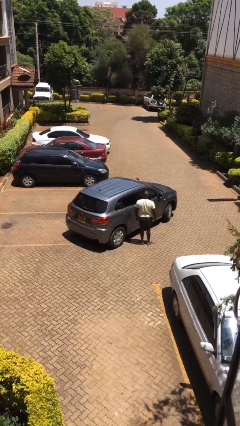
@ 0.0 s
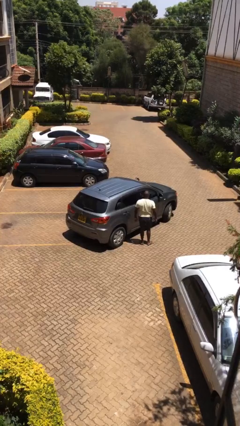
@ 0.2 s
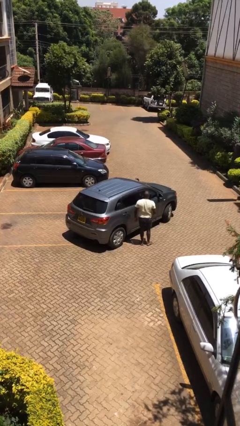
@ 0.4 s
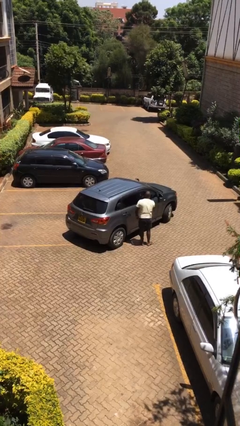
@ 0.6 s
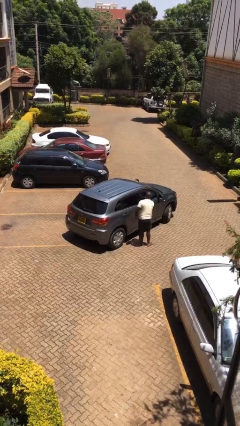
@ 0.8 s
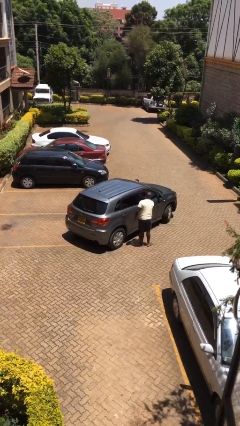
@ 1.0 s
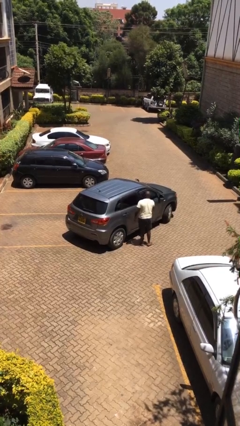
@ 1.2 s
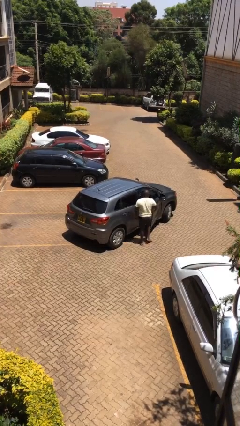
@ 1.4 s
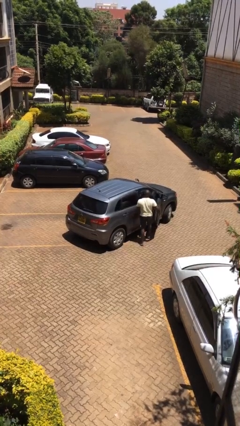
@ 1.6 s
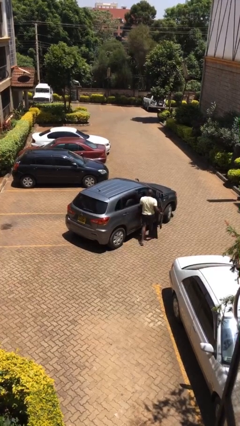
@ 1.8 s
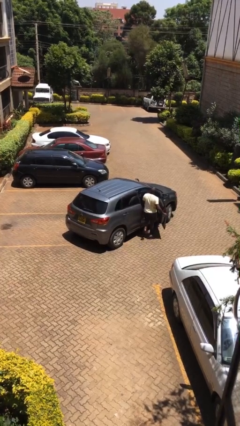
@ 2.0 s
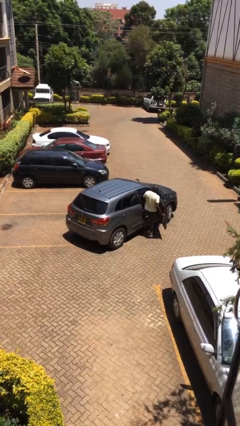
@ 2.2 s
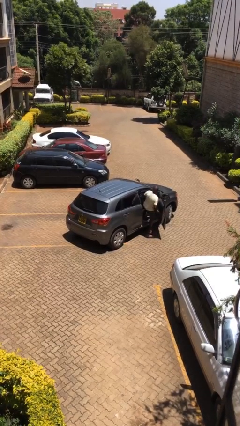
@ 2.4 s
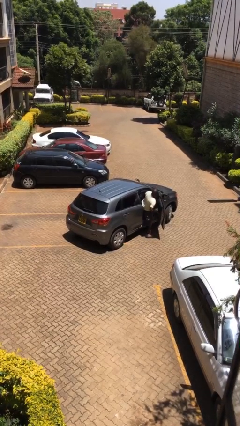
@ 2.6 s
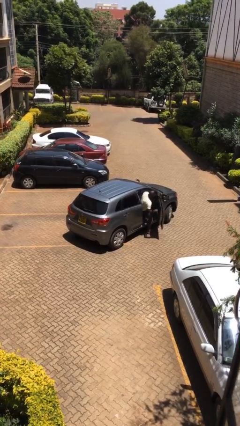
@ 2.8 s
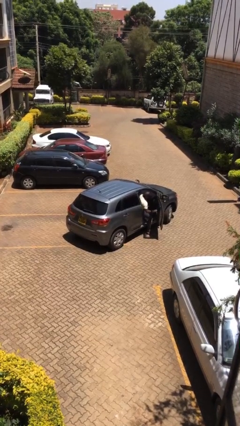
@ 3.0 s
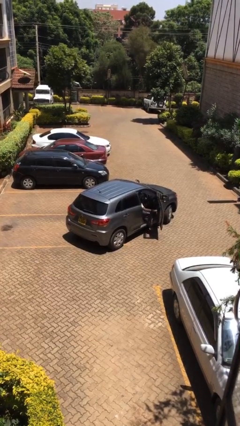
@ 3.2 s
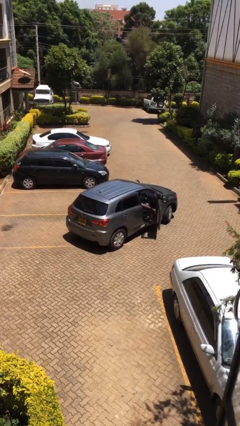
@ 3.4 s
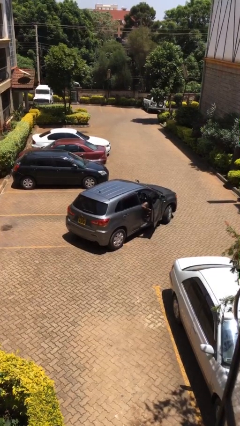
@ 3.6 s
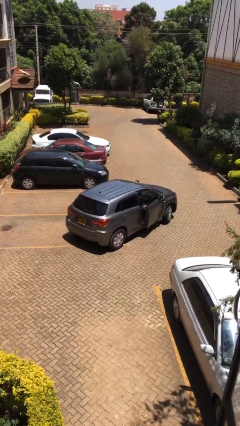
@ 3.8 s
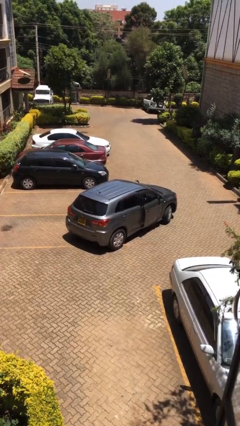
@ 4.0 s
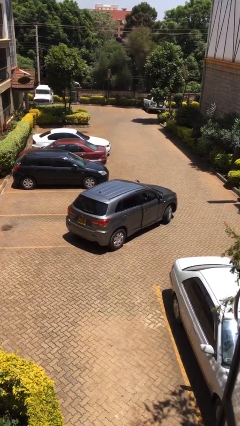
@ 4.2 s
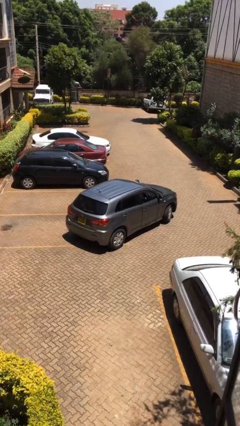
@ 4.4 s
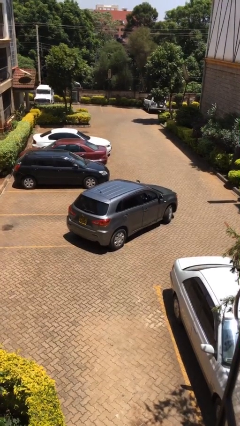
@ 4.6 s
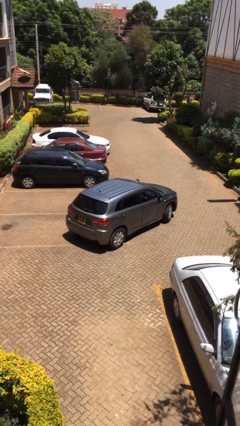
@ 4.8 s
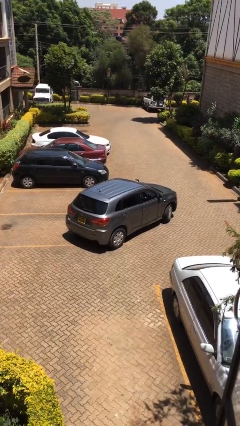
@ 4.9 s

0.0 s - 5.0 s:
car picks up person

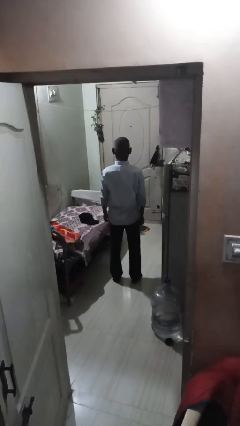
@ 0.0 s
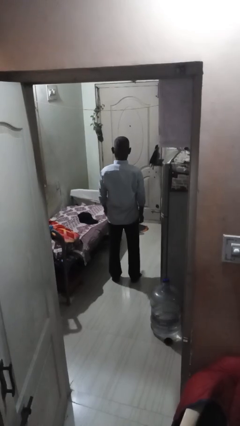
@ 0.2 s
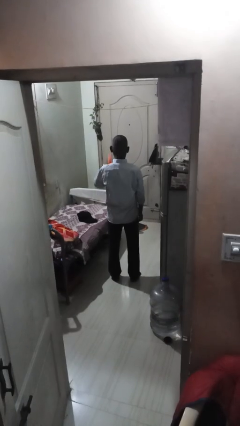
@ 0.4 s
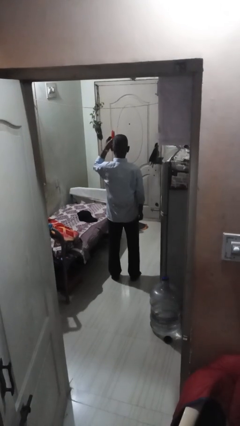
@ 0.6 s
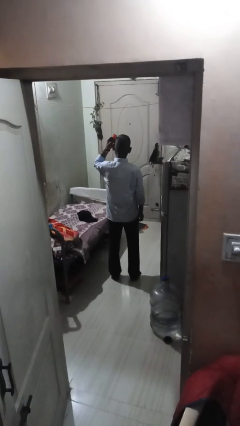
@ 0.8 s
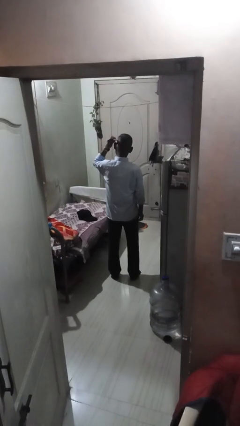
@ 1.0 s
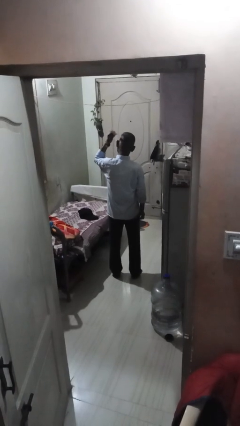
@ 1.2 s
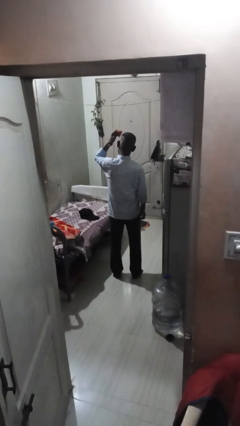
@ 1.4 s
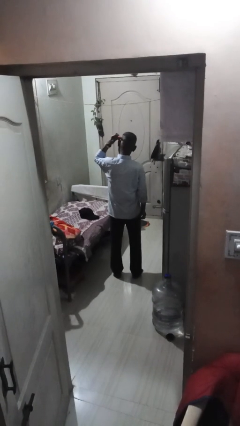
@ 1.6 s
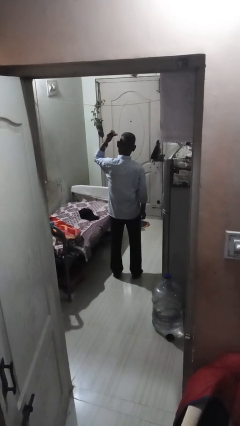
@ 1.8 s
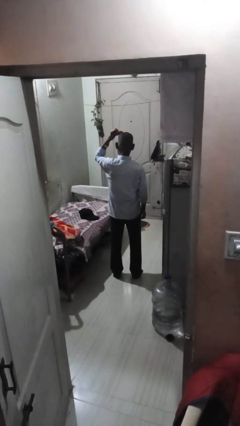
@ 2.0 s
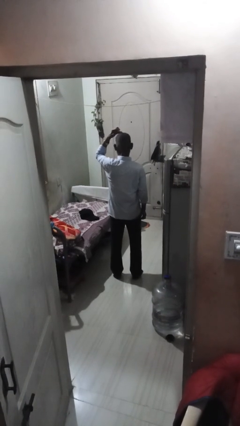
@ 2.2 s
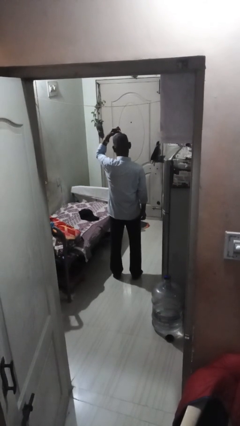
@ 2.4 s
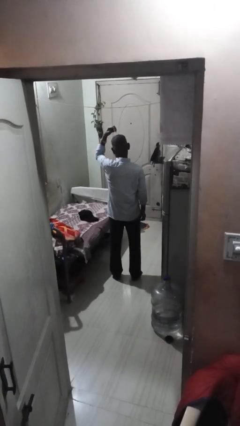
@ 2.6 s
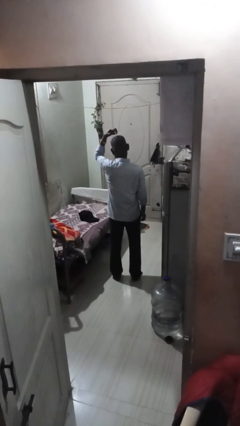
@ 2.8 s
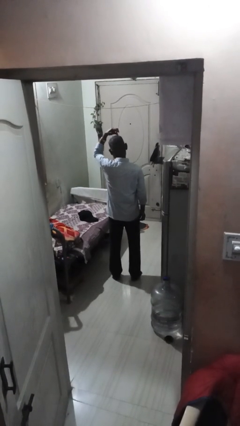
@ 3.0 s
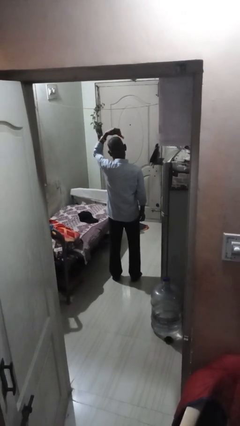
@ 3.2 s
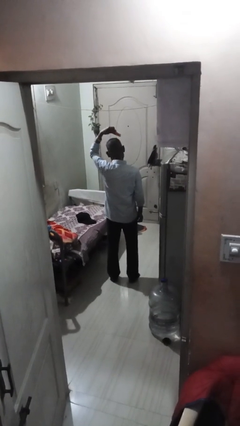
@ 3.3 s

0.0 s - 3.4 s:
person brushes hair

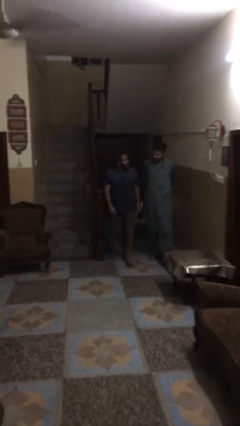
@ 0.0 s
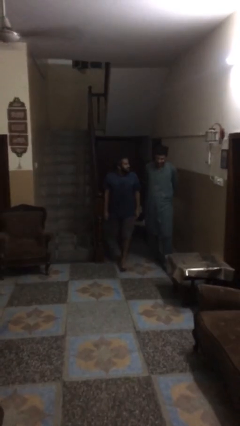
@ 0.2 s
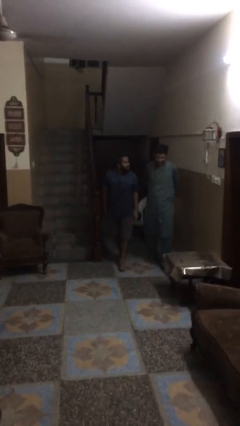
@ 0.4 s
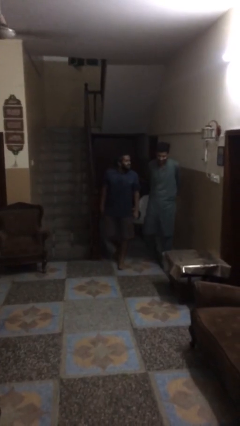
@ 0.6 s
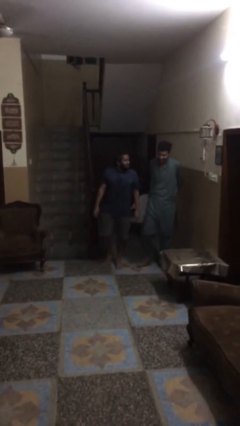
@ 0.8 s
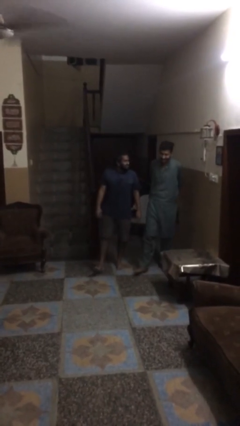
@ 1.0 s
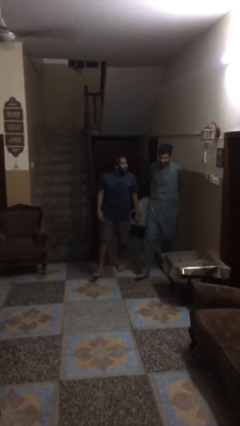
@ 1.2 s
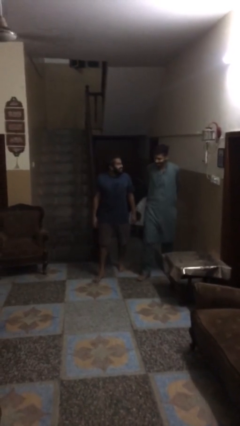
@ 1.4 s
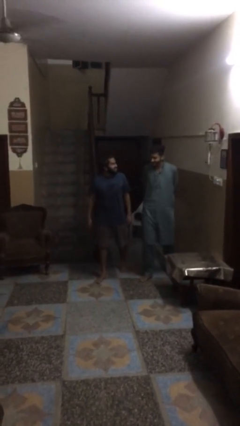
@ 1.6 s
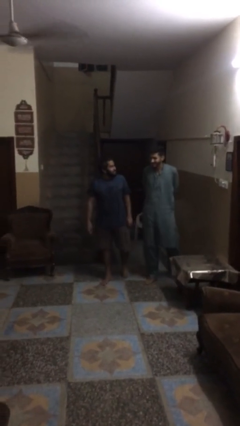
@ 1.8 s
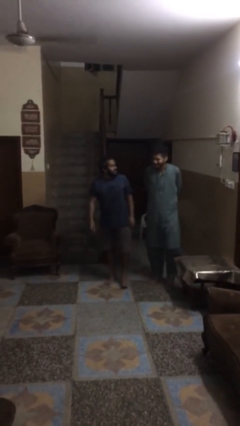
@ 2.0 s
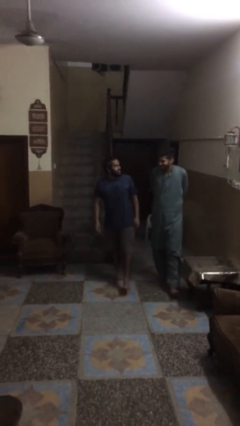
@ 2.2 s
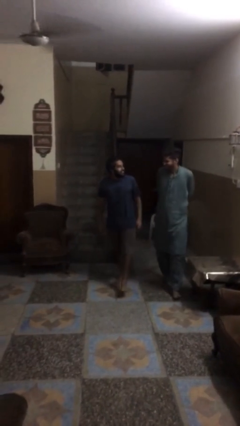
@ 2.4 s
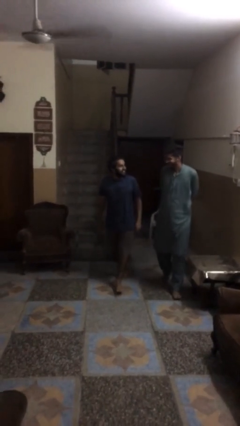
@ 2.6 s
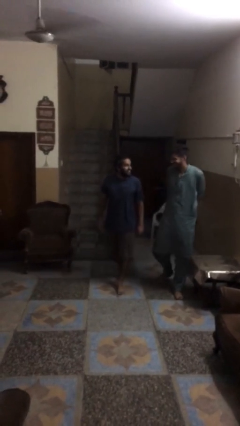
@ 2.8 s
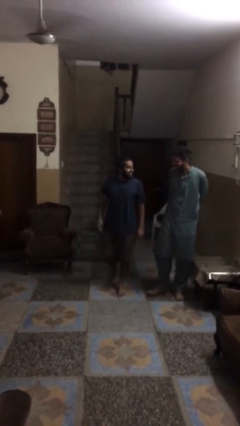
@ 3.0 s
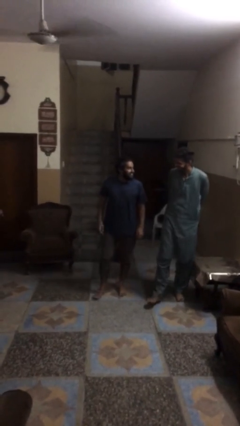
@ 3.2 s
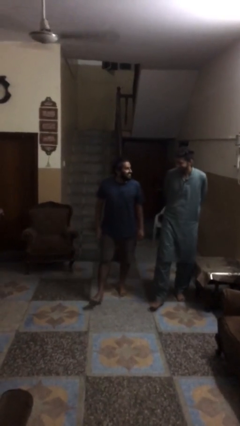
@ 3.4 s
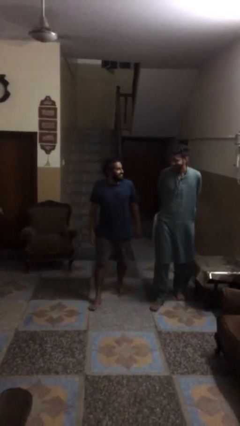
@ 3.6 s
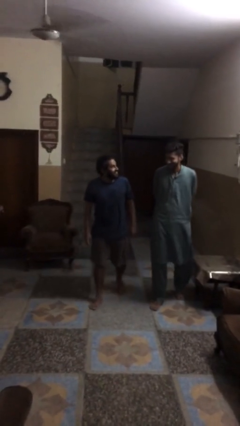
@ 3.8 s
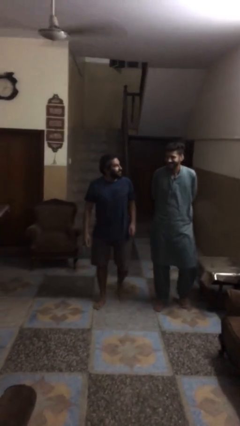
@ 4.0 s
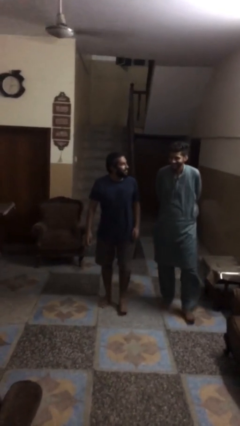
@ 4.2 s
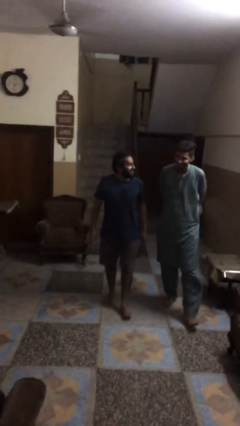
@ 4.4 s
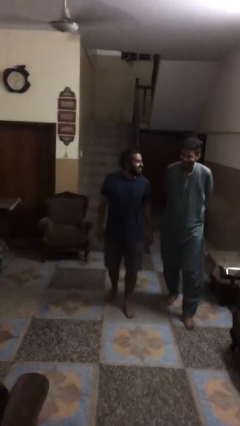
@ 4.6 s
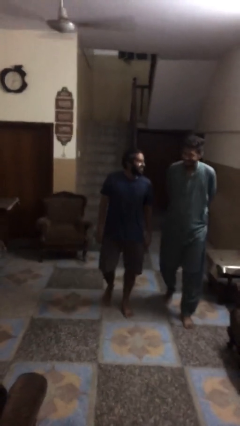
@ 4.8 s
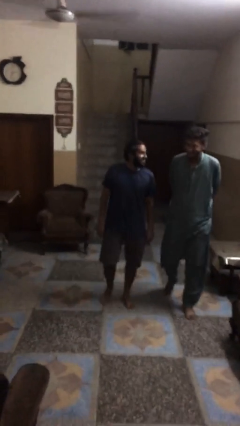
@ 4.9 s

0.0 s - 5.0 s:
person talks to person

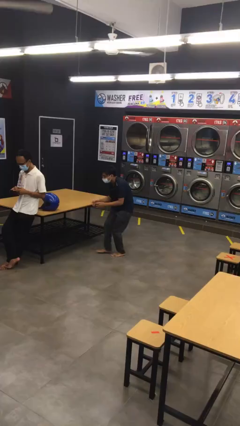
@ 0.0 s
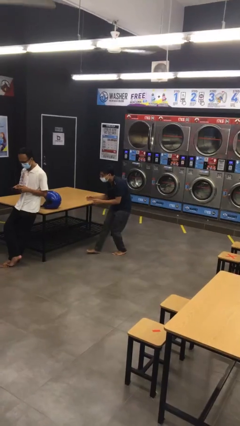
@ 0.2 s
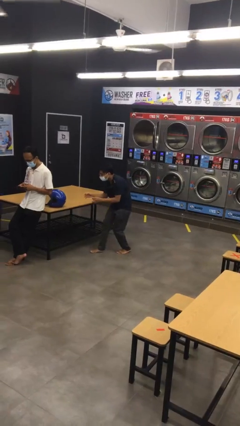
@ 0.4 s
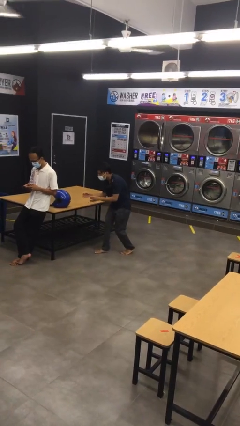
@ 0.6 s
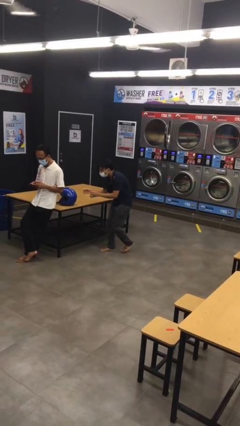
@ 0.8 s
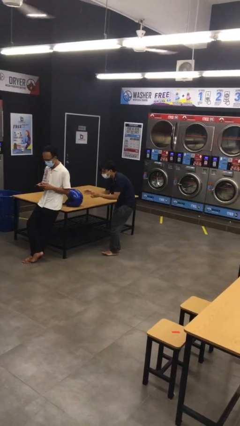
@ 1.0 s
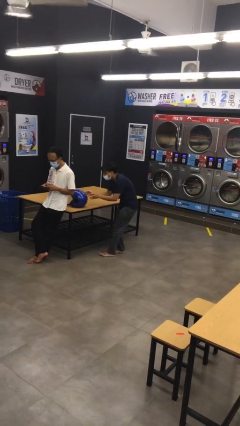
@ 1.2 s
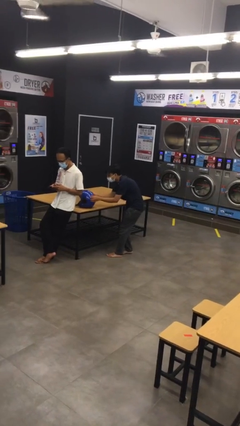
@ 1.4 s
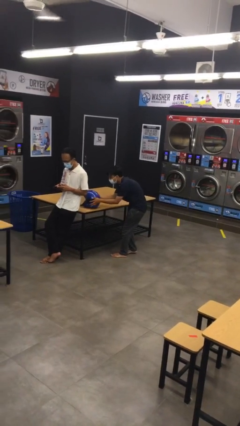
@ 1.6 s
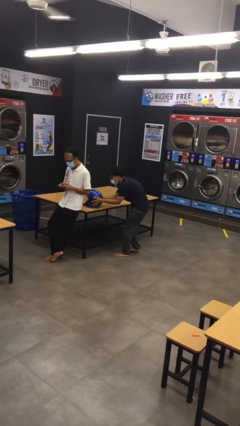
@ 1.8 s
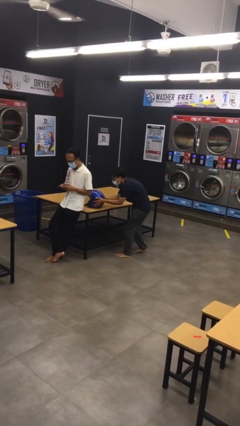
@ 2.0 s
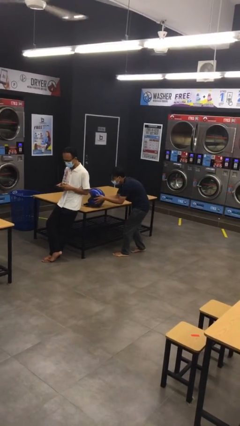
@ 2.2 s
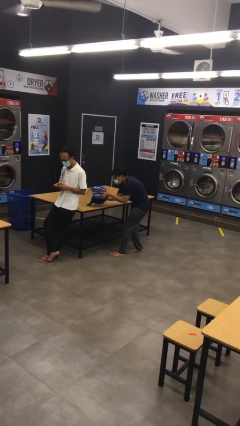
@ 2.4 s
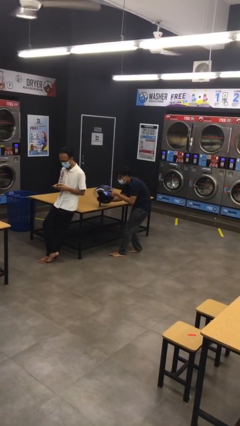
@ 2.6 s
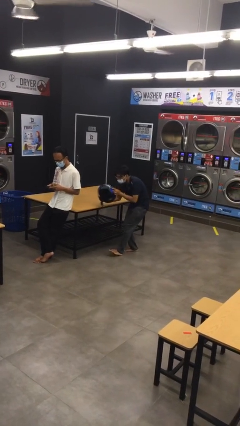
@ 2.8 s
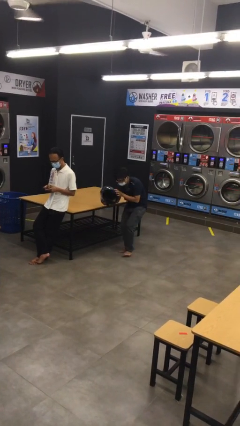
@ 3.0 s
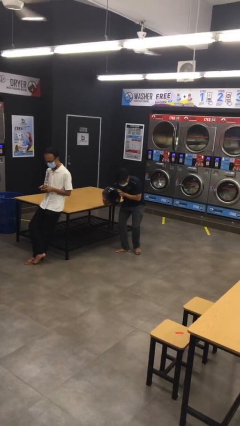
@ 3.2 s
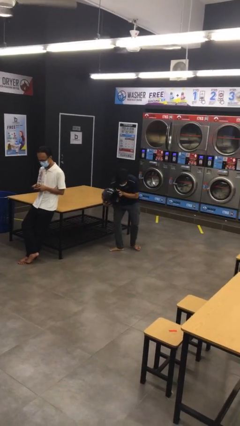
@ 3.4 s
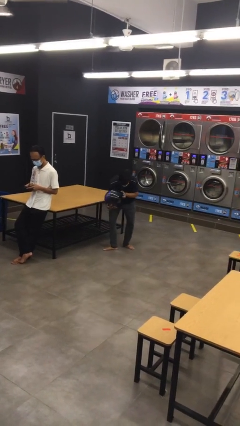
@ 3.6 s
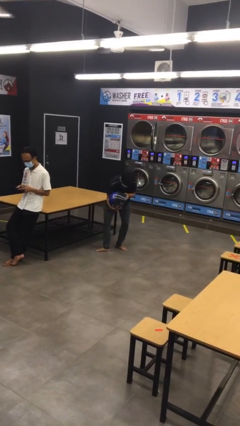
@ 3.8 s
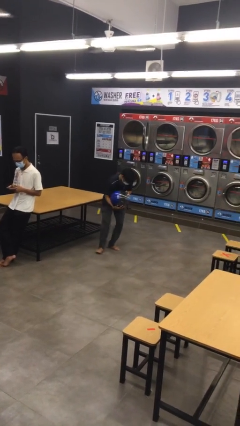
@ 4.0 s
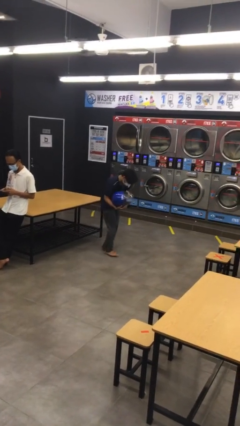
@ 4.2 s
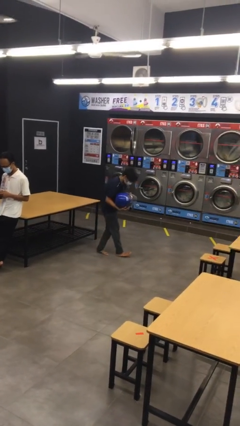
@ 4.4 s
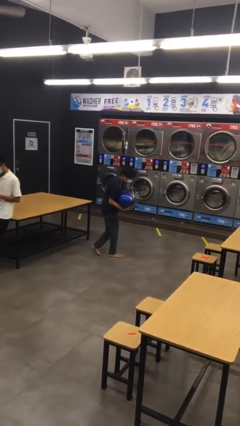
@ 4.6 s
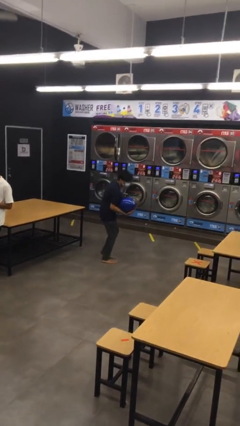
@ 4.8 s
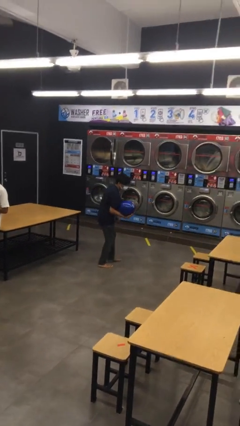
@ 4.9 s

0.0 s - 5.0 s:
person steals object from person
